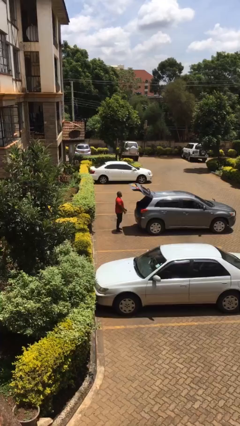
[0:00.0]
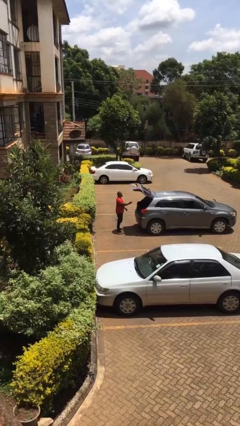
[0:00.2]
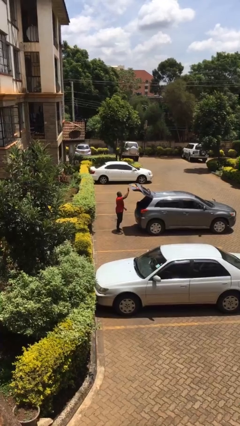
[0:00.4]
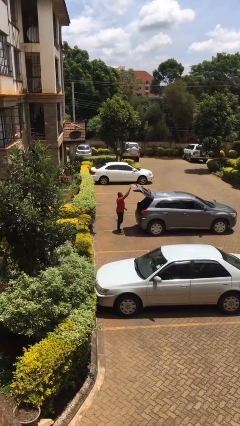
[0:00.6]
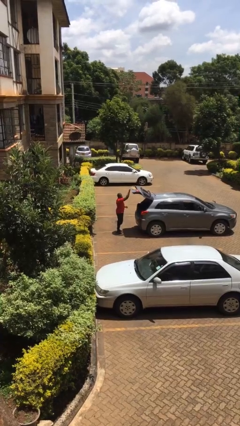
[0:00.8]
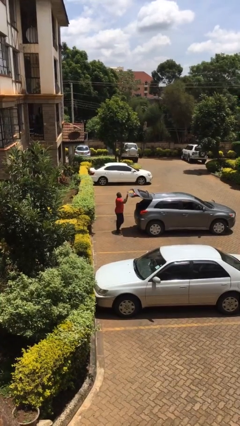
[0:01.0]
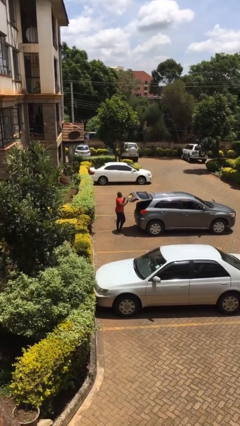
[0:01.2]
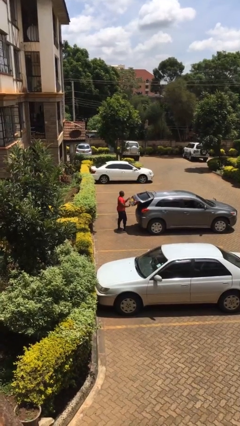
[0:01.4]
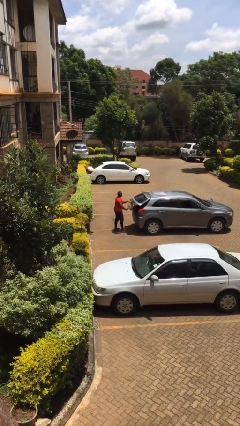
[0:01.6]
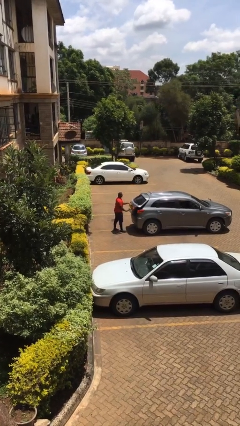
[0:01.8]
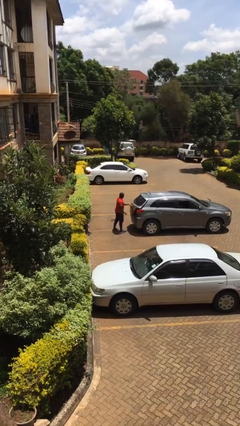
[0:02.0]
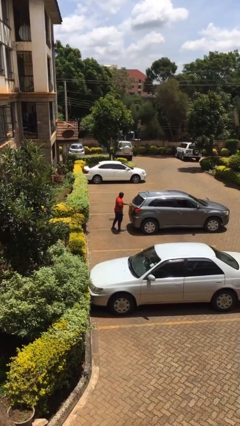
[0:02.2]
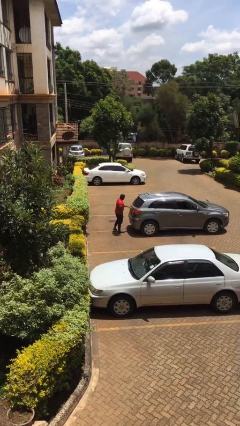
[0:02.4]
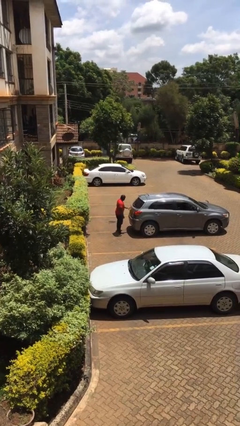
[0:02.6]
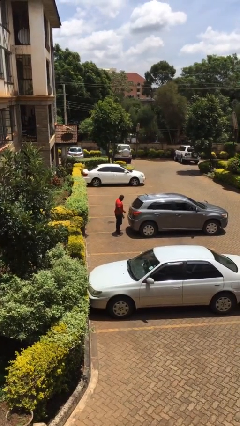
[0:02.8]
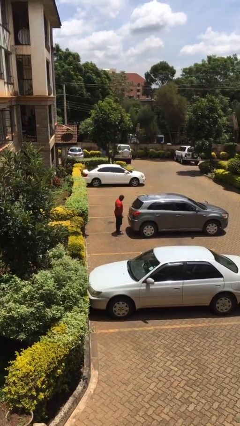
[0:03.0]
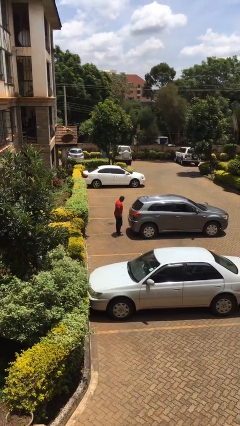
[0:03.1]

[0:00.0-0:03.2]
person closes car trunk

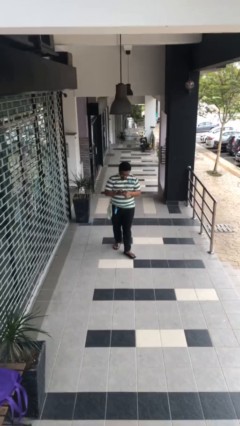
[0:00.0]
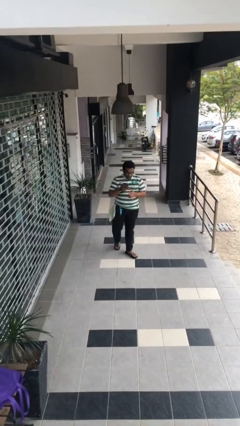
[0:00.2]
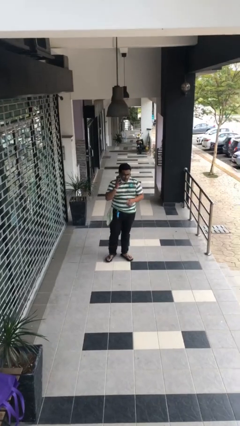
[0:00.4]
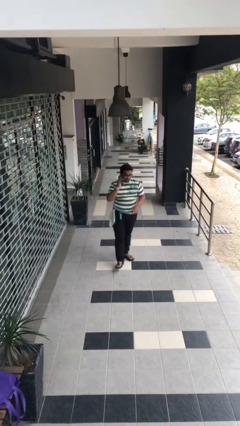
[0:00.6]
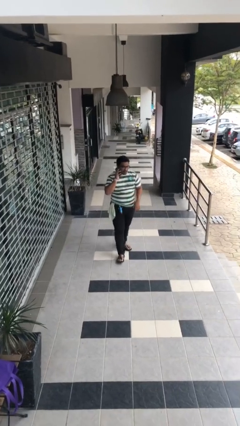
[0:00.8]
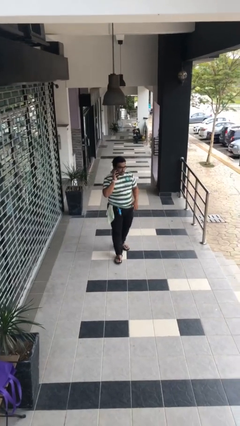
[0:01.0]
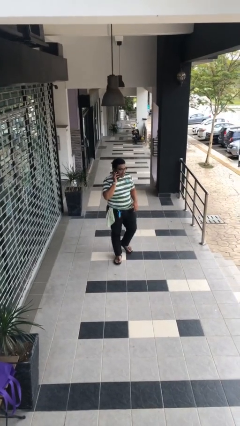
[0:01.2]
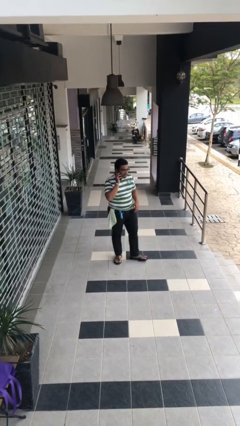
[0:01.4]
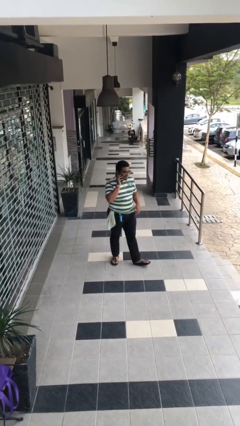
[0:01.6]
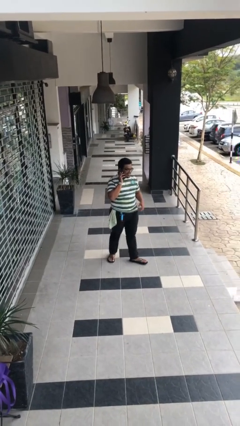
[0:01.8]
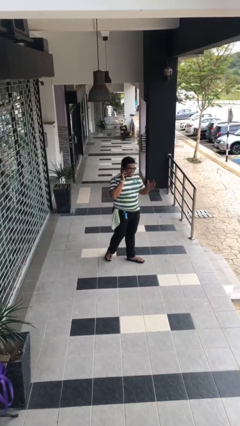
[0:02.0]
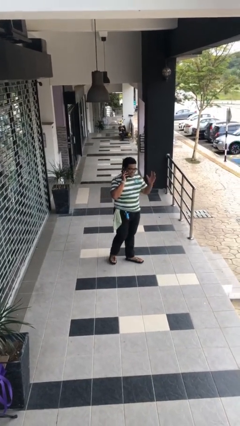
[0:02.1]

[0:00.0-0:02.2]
person talks on phone

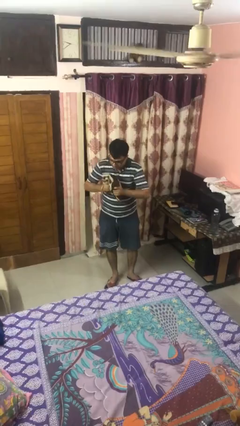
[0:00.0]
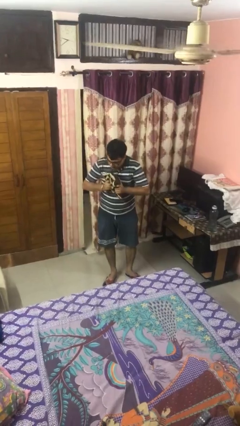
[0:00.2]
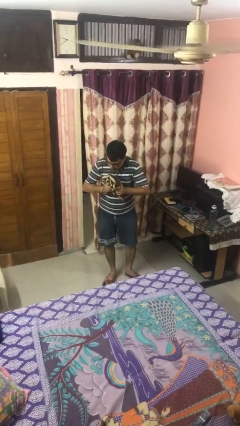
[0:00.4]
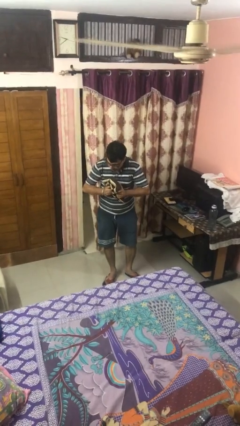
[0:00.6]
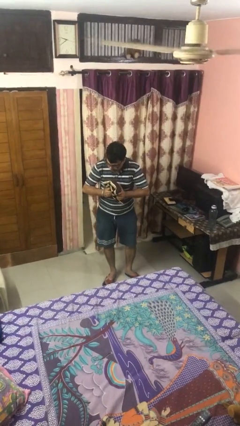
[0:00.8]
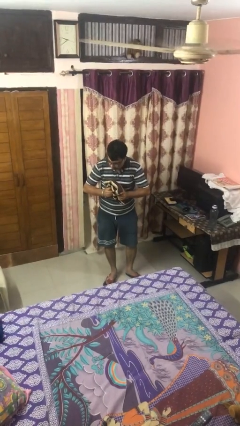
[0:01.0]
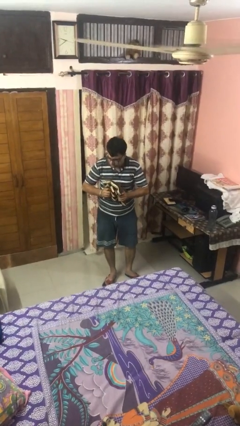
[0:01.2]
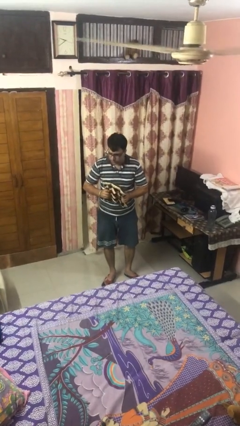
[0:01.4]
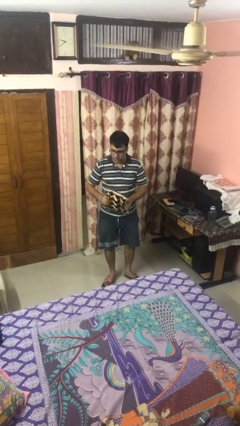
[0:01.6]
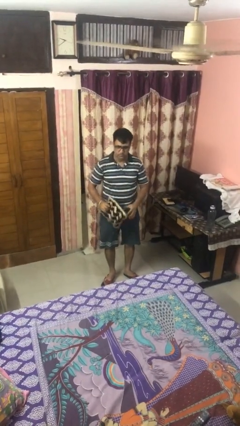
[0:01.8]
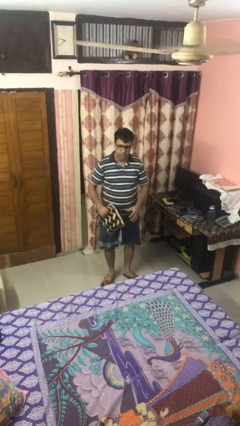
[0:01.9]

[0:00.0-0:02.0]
person squeezes object

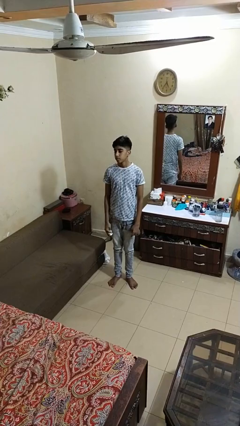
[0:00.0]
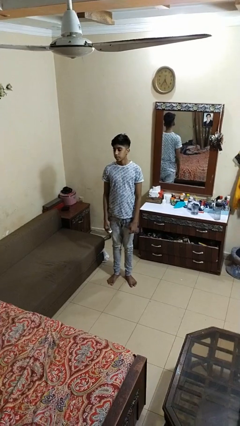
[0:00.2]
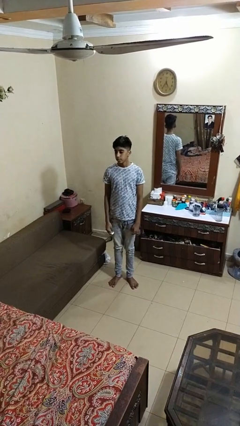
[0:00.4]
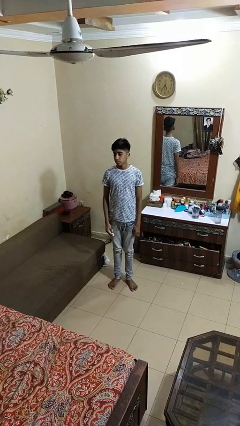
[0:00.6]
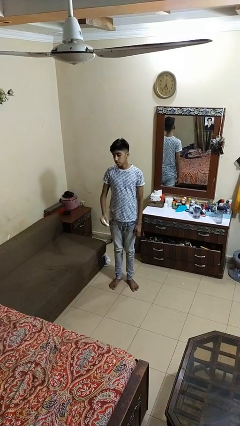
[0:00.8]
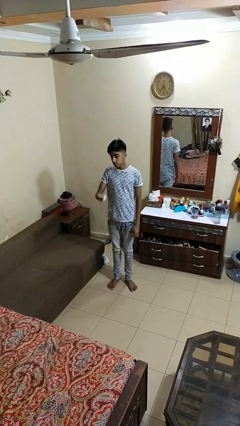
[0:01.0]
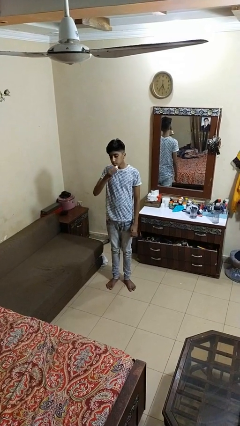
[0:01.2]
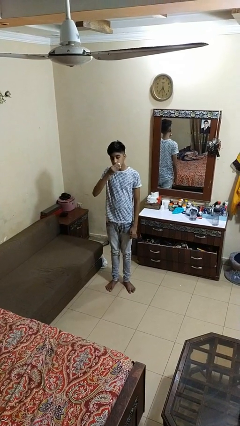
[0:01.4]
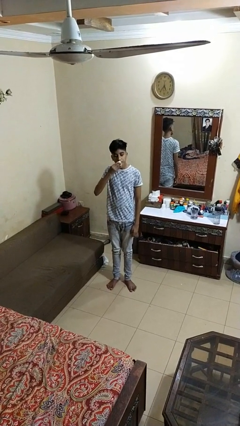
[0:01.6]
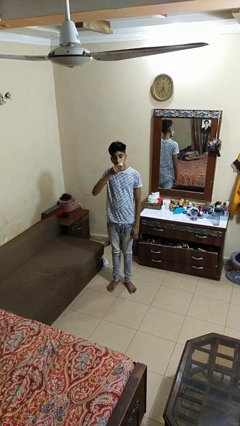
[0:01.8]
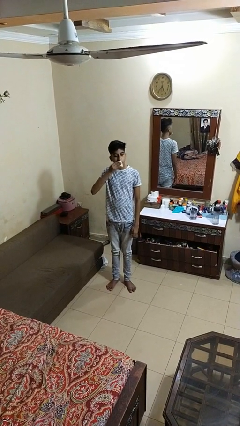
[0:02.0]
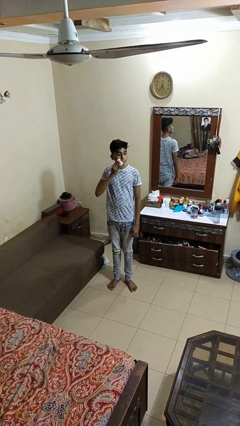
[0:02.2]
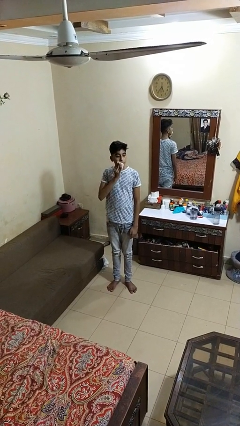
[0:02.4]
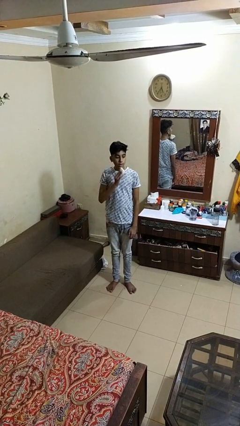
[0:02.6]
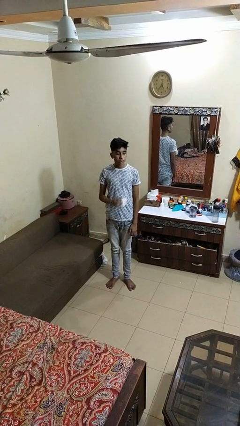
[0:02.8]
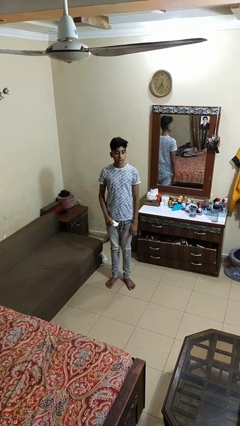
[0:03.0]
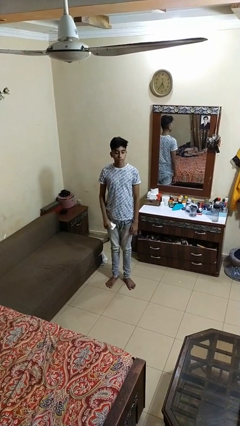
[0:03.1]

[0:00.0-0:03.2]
person wipes mouth with napkin

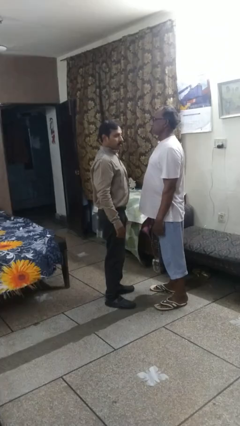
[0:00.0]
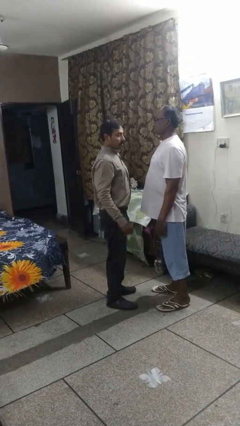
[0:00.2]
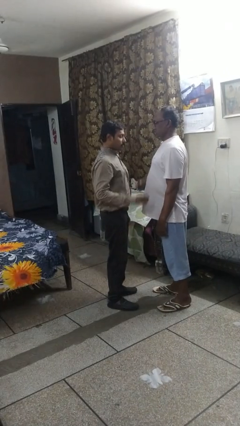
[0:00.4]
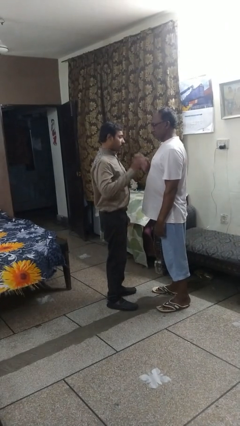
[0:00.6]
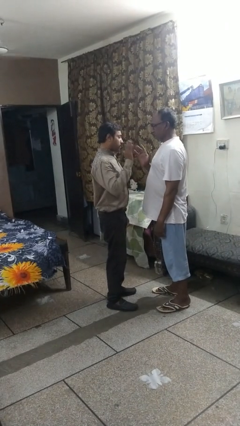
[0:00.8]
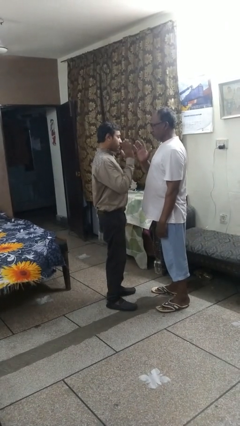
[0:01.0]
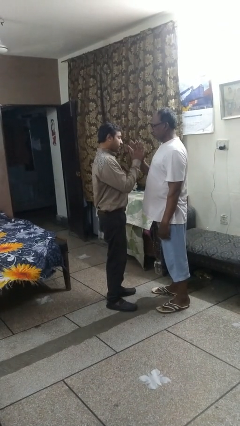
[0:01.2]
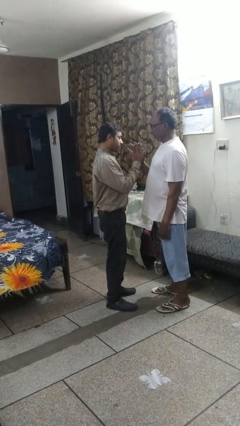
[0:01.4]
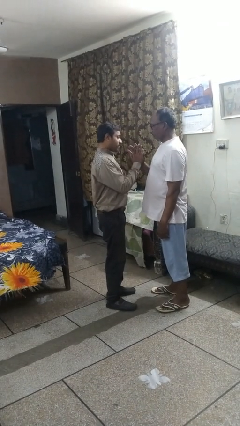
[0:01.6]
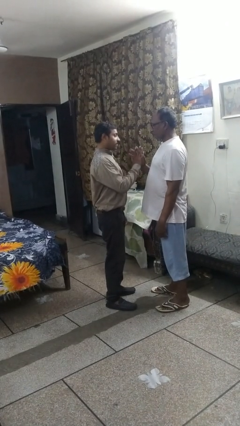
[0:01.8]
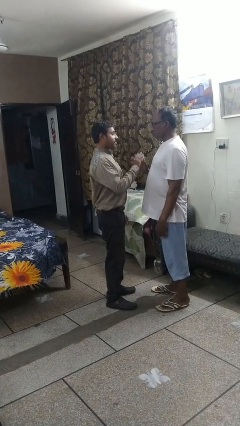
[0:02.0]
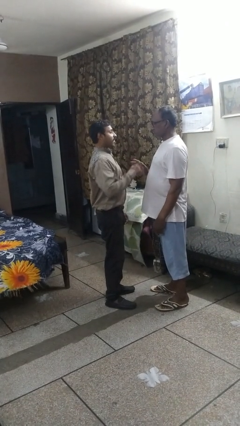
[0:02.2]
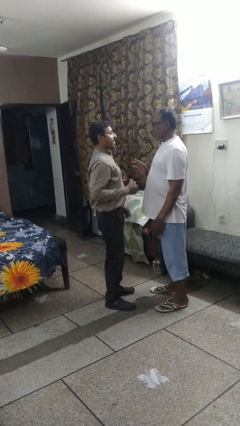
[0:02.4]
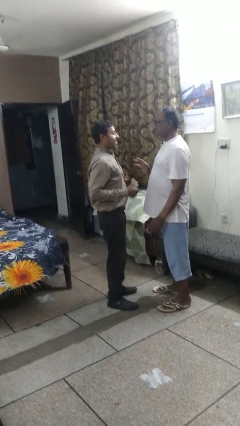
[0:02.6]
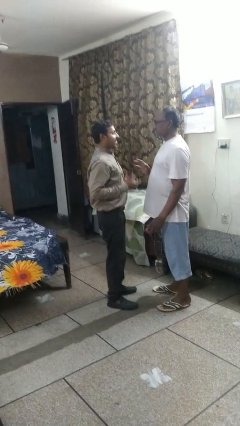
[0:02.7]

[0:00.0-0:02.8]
person highfives hand

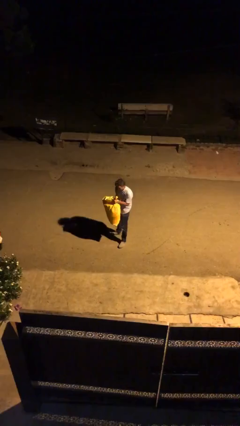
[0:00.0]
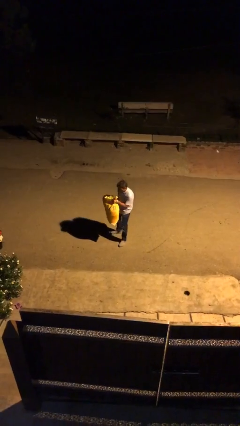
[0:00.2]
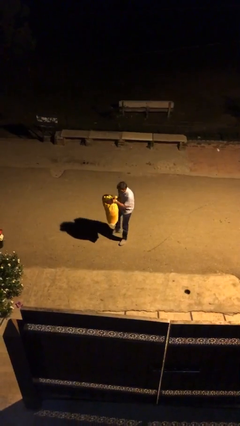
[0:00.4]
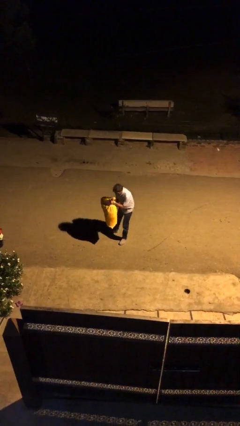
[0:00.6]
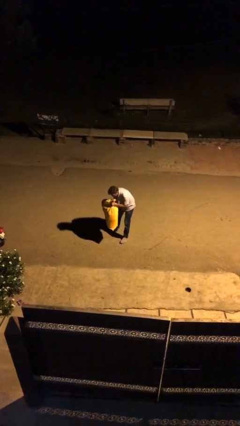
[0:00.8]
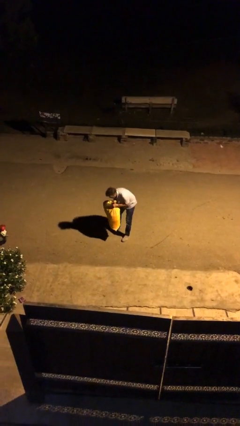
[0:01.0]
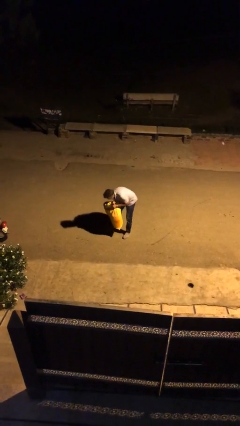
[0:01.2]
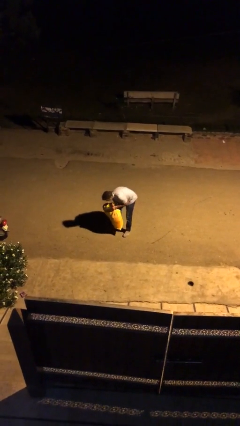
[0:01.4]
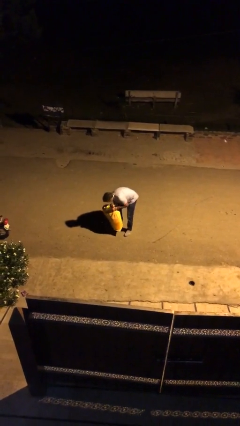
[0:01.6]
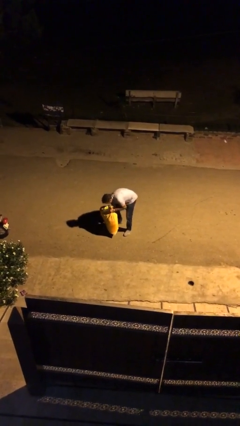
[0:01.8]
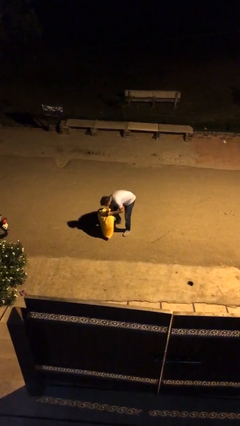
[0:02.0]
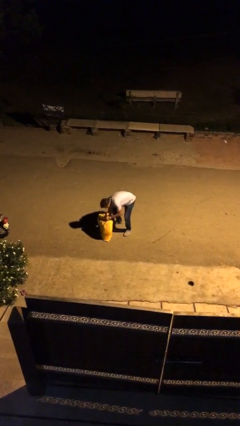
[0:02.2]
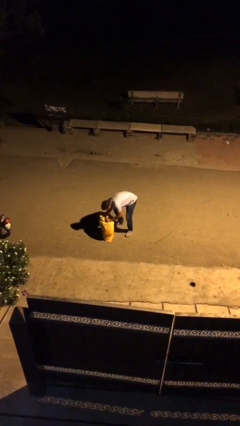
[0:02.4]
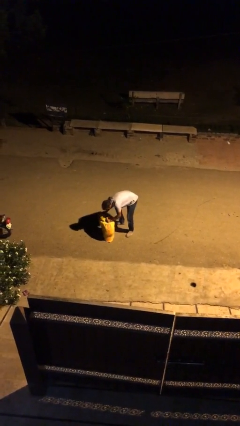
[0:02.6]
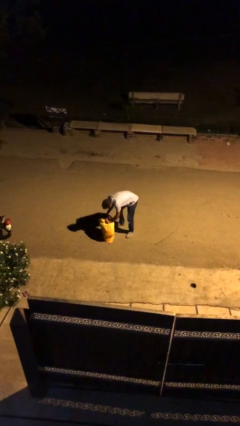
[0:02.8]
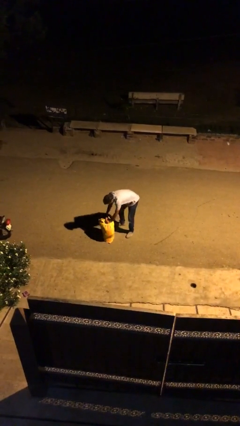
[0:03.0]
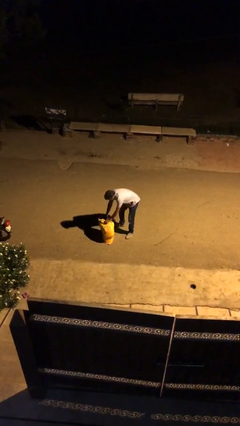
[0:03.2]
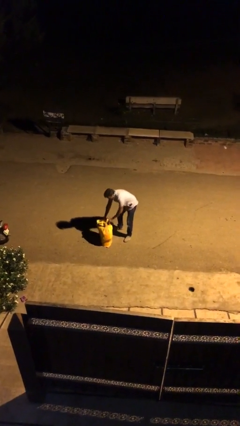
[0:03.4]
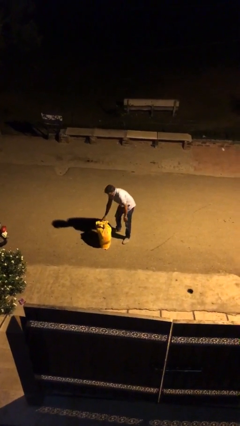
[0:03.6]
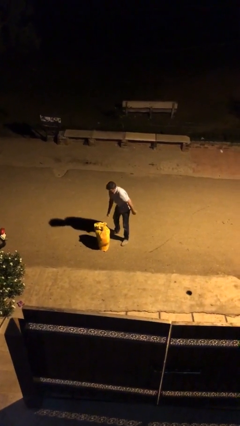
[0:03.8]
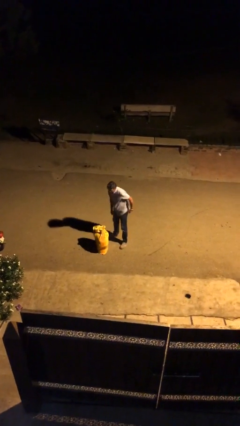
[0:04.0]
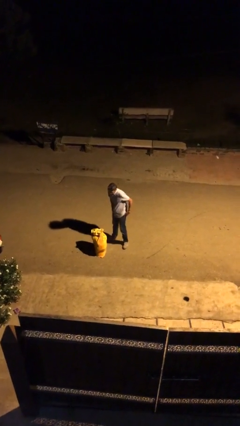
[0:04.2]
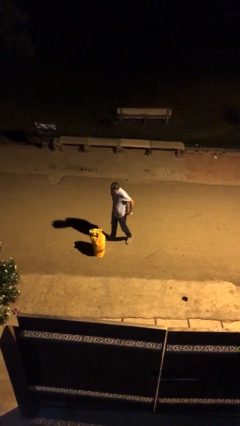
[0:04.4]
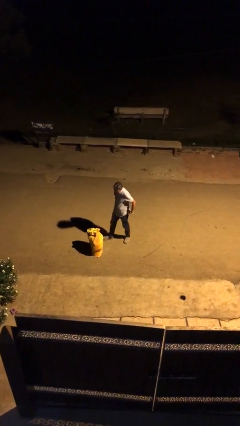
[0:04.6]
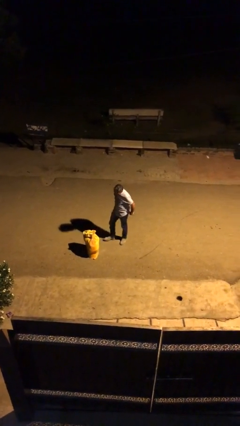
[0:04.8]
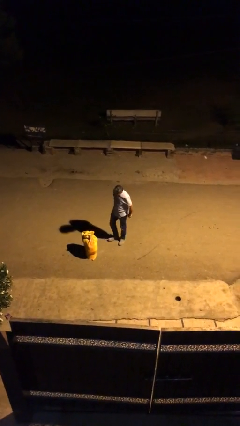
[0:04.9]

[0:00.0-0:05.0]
person puts down object on floor
